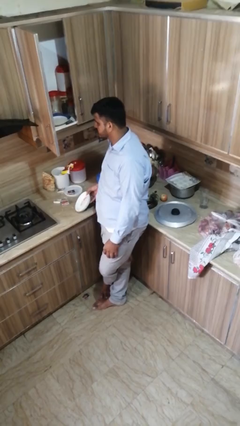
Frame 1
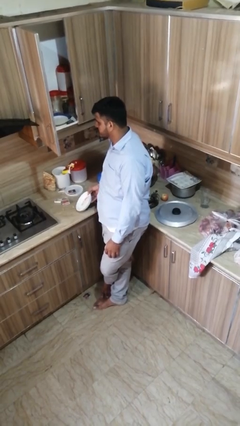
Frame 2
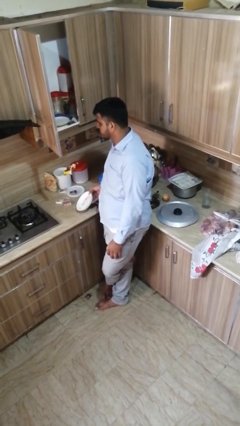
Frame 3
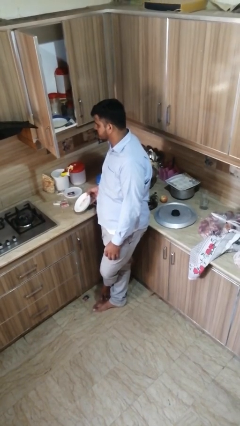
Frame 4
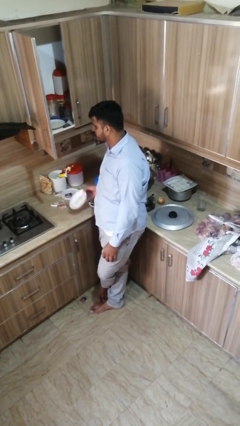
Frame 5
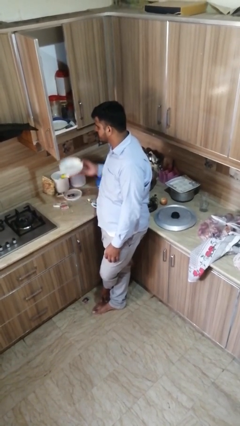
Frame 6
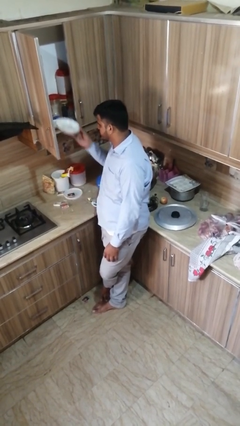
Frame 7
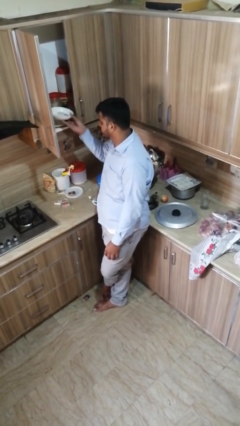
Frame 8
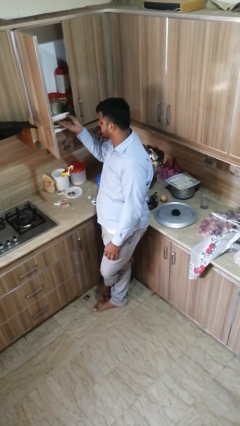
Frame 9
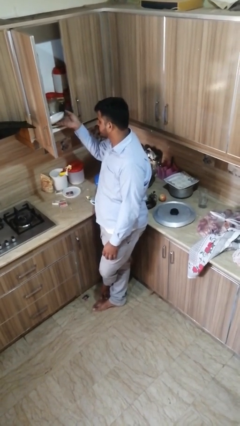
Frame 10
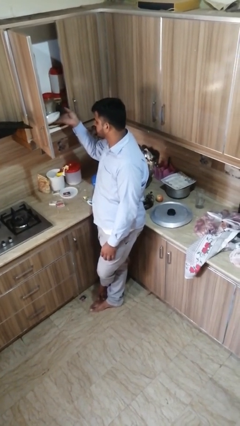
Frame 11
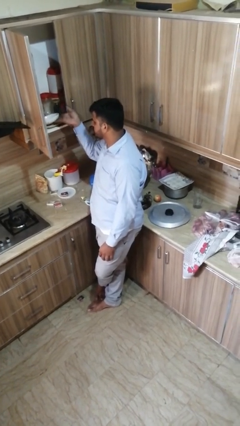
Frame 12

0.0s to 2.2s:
person puts object in cabinet

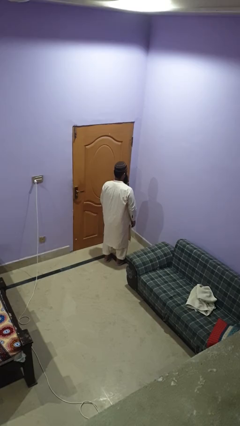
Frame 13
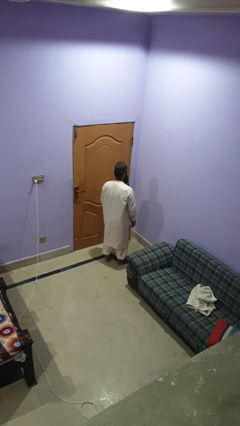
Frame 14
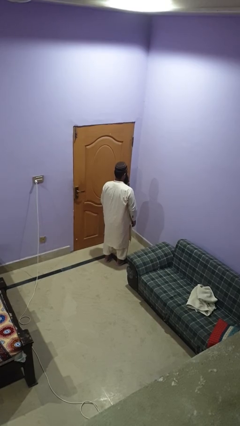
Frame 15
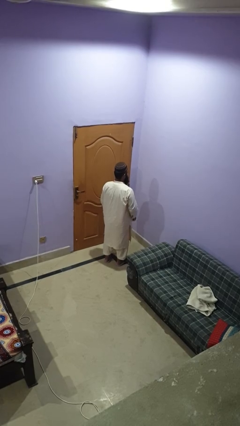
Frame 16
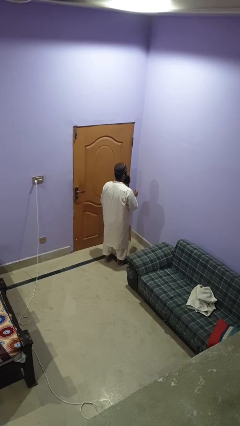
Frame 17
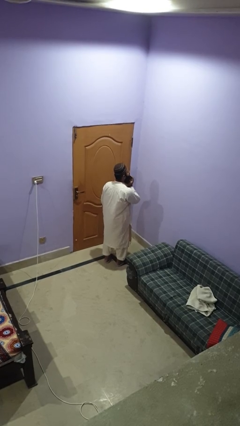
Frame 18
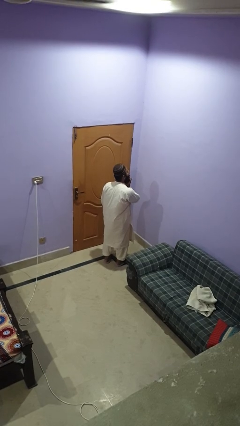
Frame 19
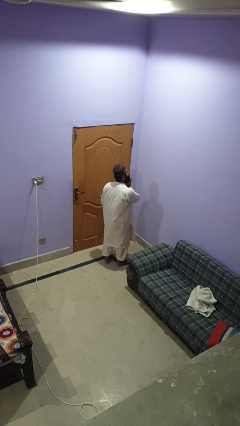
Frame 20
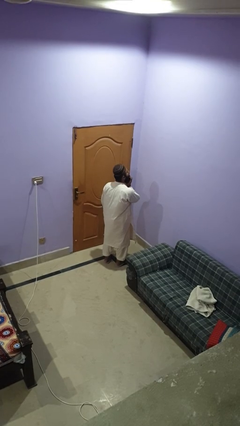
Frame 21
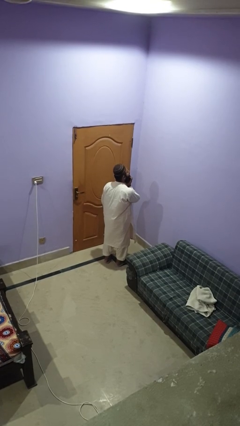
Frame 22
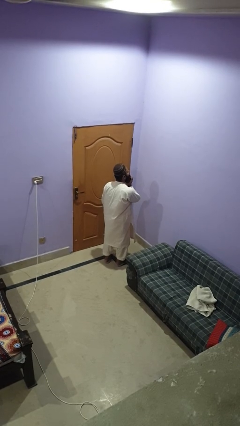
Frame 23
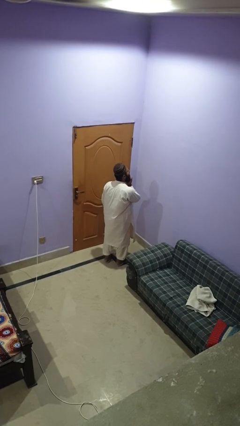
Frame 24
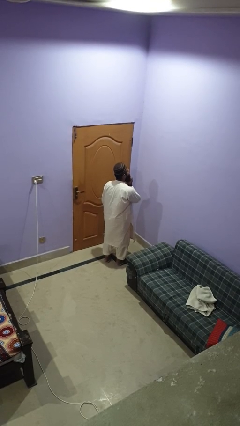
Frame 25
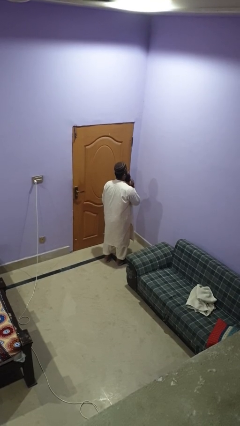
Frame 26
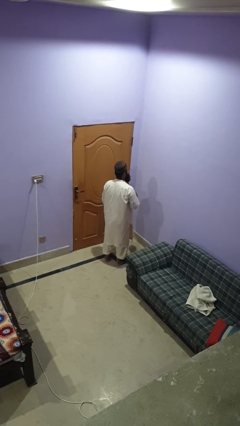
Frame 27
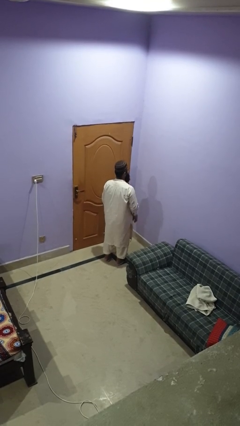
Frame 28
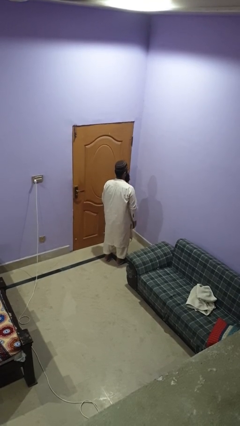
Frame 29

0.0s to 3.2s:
person strokes chin

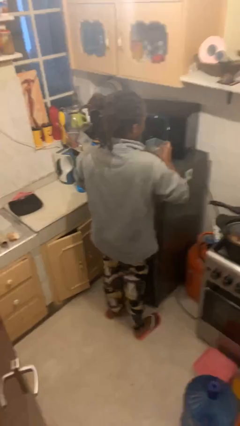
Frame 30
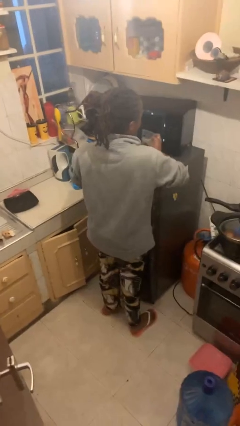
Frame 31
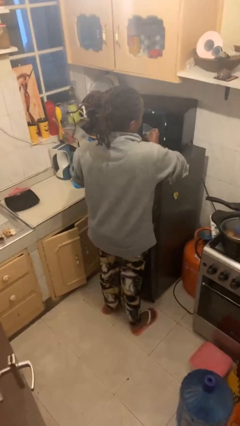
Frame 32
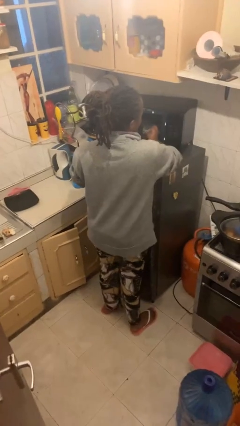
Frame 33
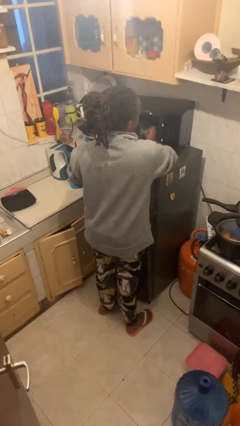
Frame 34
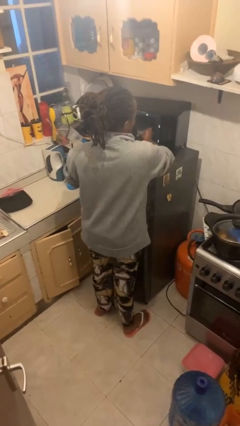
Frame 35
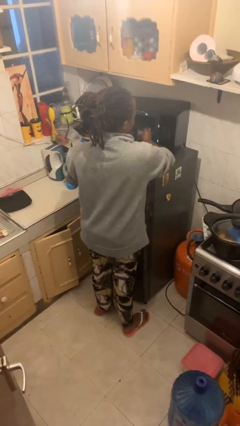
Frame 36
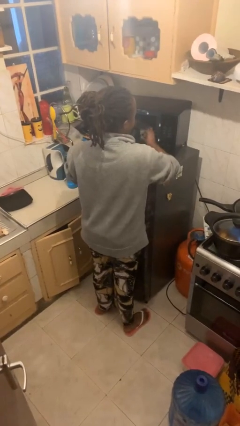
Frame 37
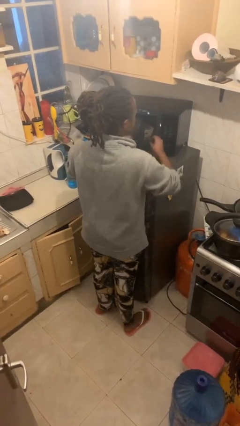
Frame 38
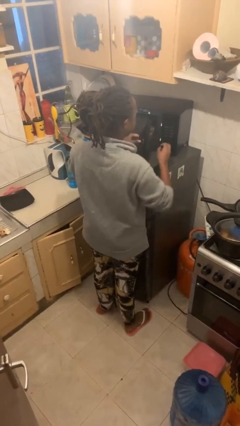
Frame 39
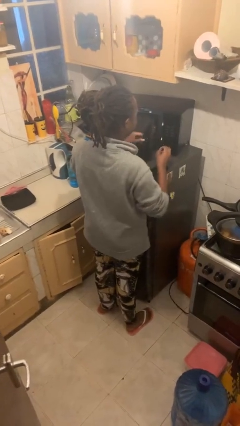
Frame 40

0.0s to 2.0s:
person puts object into microwave

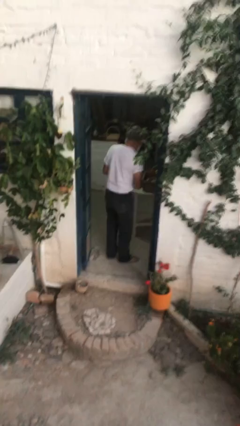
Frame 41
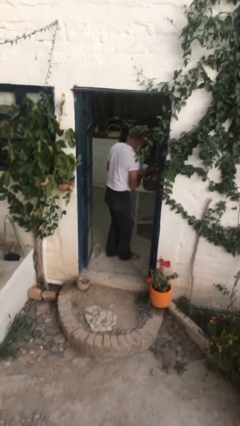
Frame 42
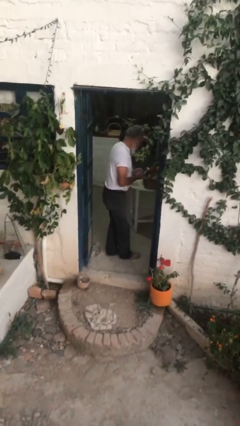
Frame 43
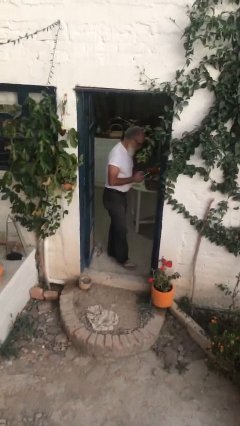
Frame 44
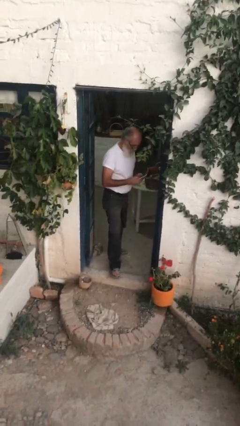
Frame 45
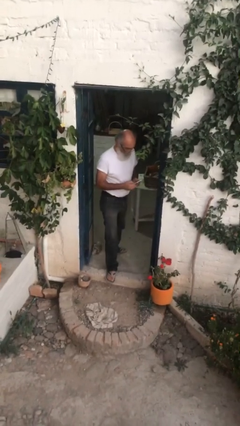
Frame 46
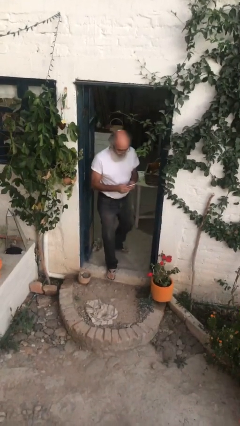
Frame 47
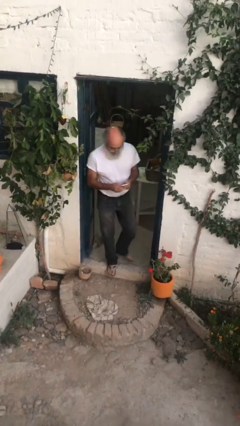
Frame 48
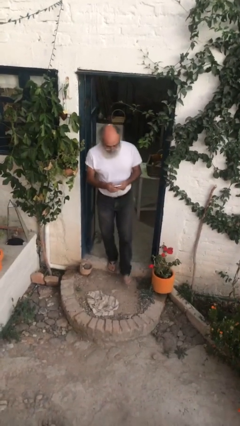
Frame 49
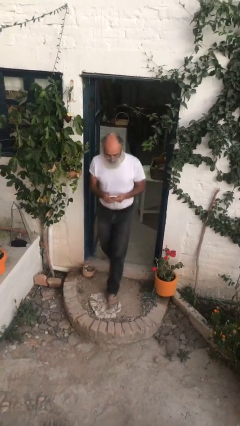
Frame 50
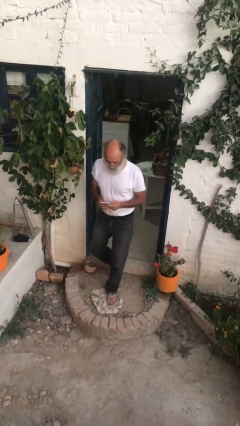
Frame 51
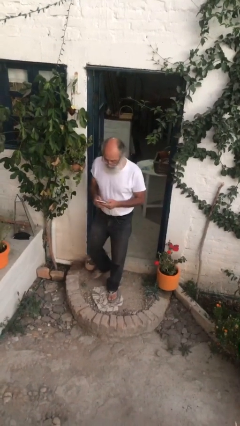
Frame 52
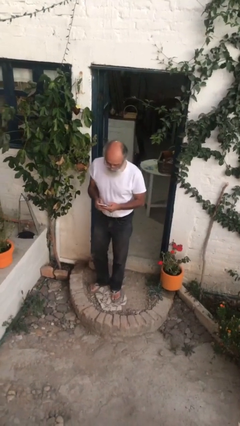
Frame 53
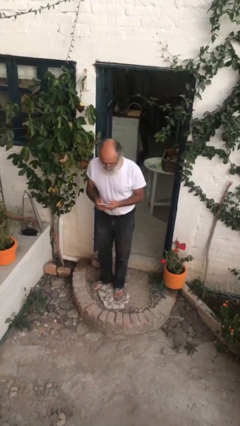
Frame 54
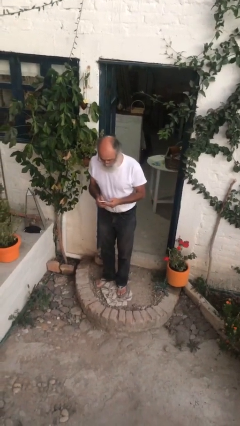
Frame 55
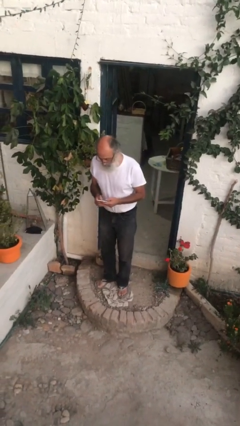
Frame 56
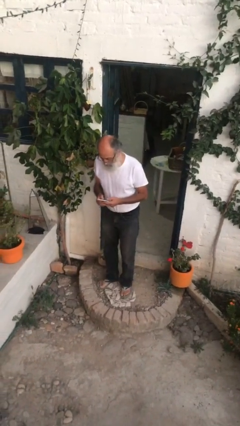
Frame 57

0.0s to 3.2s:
person enters scene through structure

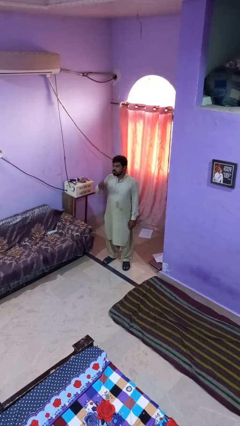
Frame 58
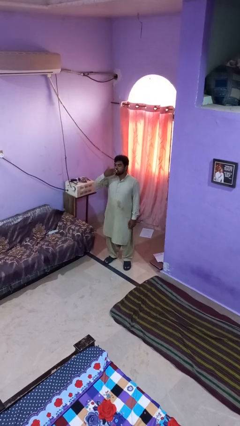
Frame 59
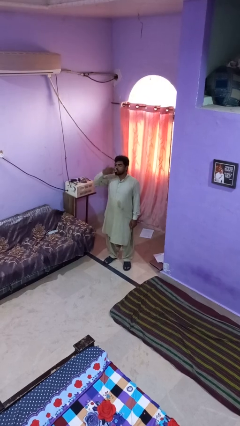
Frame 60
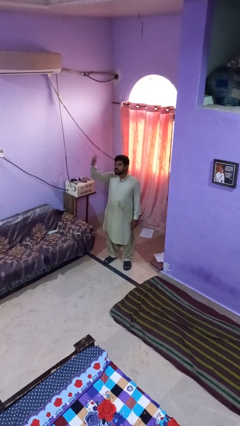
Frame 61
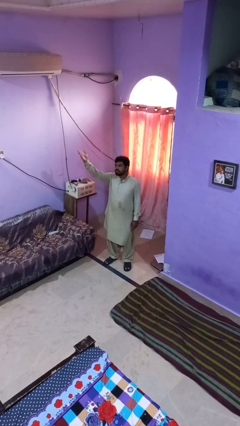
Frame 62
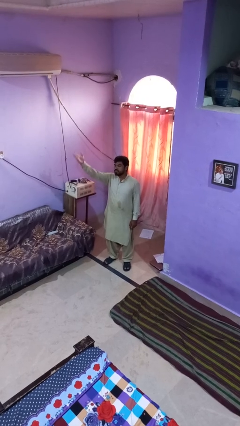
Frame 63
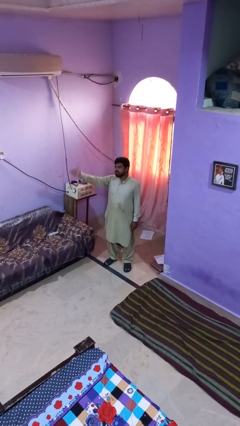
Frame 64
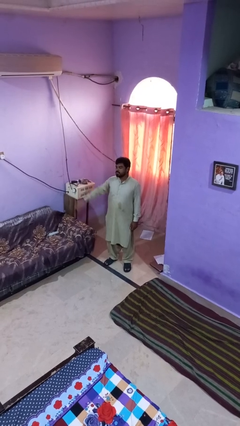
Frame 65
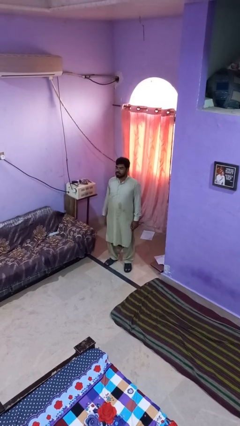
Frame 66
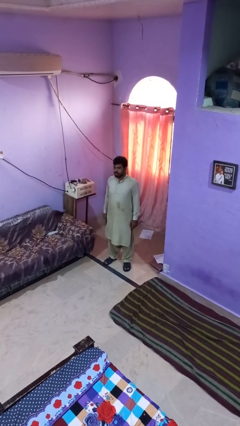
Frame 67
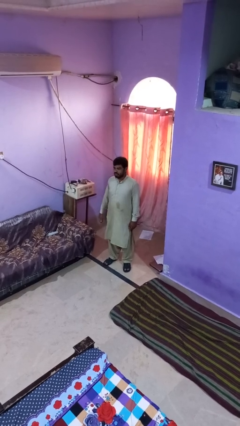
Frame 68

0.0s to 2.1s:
person gestures blow kiss

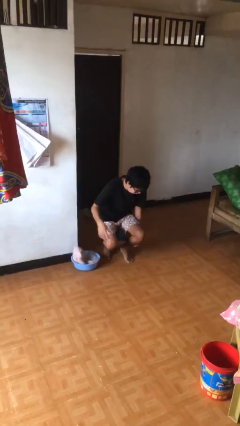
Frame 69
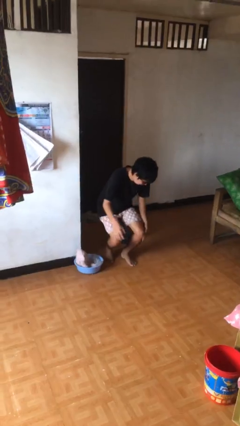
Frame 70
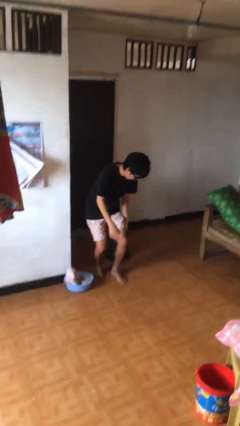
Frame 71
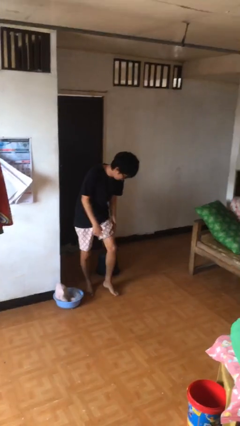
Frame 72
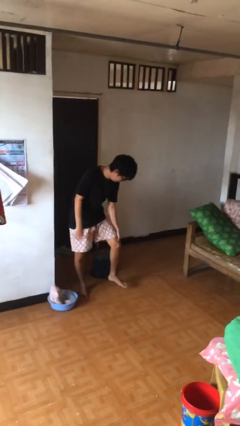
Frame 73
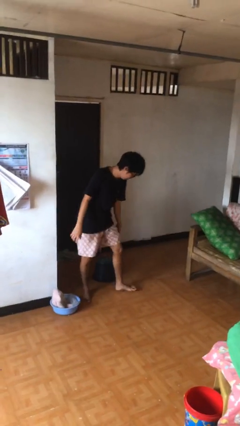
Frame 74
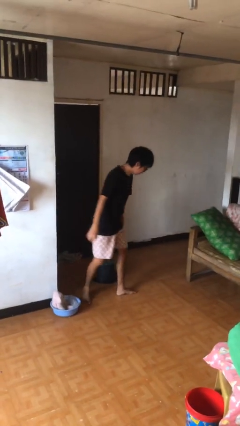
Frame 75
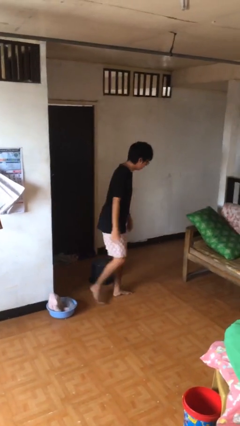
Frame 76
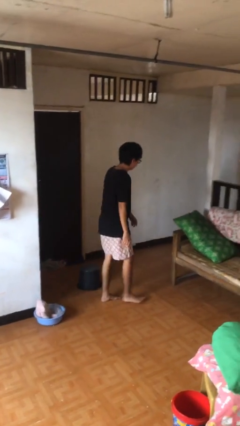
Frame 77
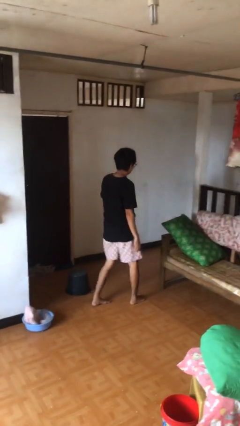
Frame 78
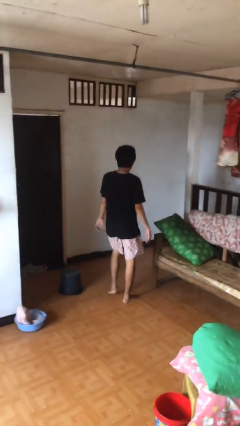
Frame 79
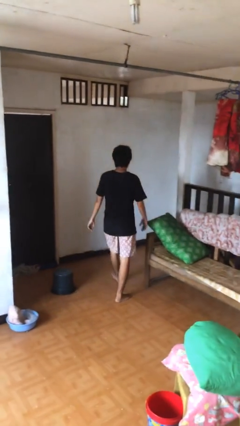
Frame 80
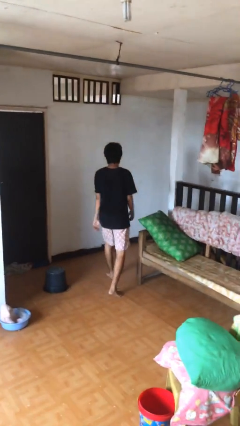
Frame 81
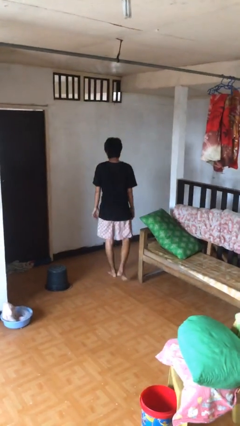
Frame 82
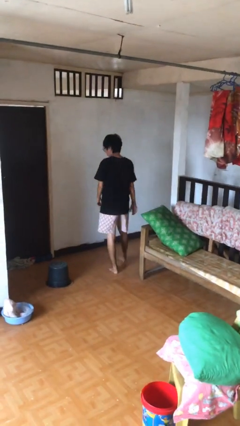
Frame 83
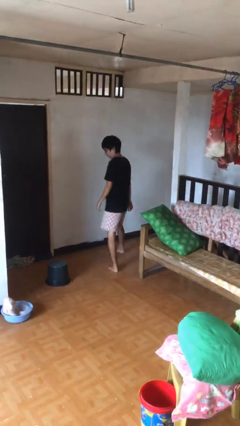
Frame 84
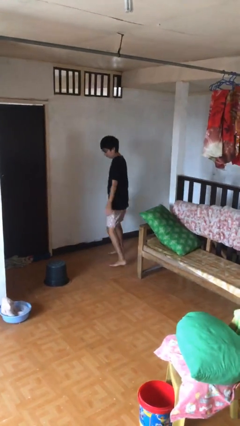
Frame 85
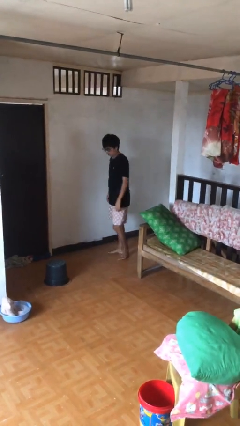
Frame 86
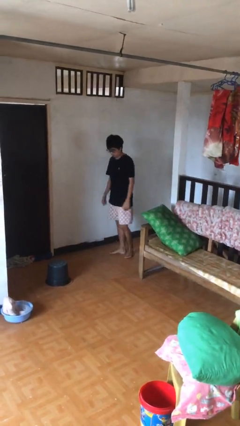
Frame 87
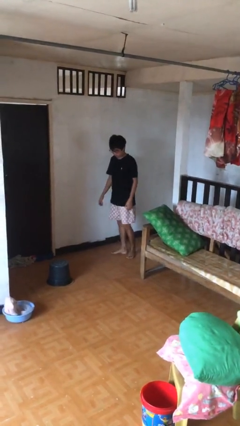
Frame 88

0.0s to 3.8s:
person stands up from floor

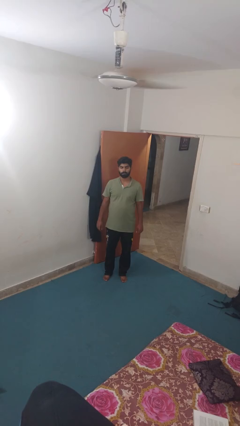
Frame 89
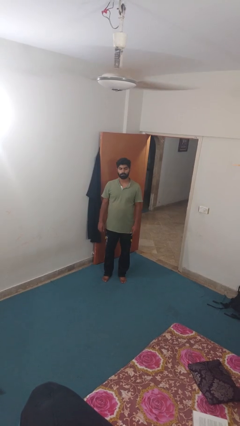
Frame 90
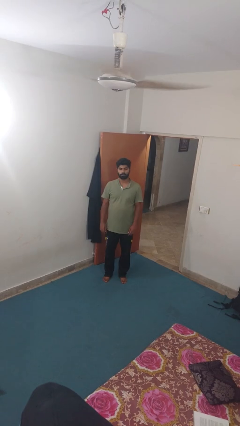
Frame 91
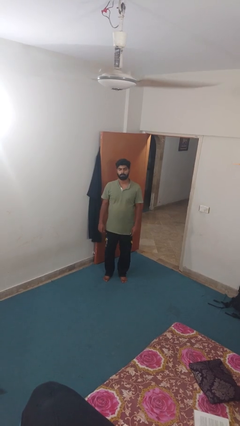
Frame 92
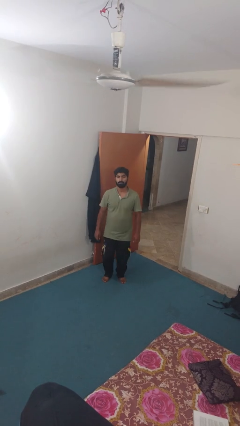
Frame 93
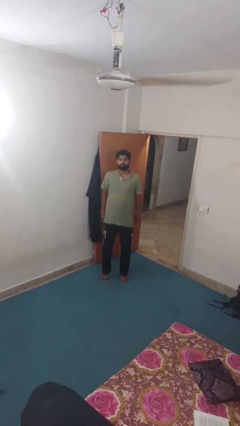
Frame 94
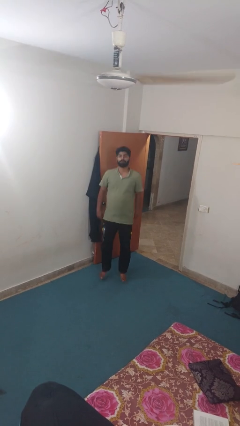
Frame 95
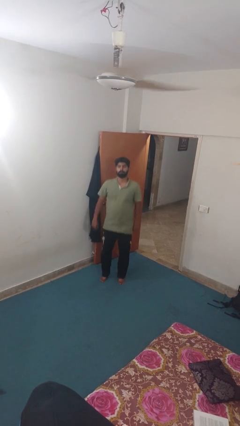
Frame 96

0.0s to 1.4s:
person jumps
